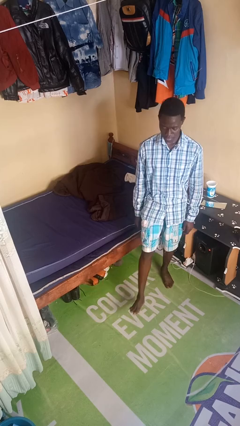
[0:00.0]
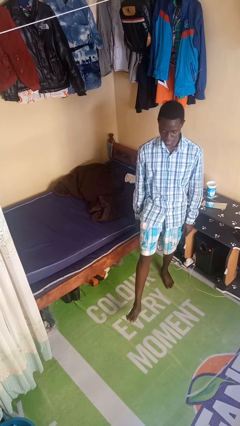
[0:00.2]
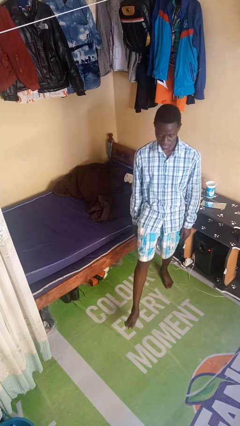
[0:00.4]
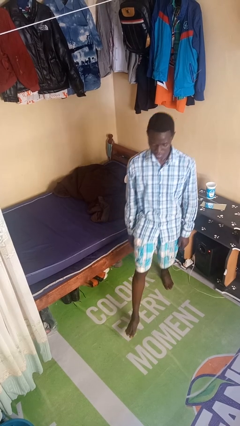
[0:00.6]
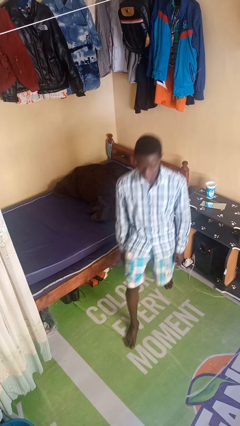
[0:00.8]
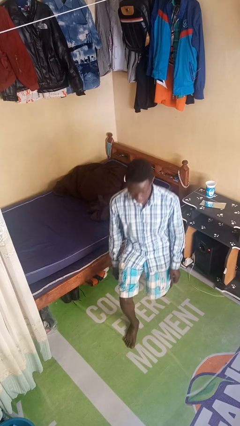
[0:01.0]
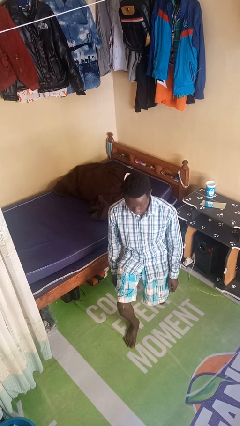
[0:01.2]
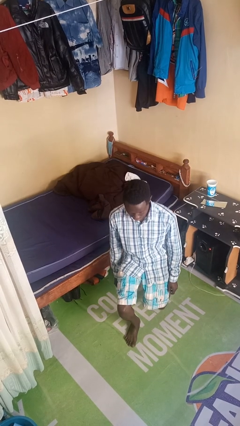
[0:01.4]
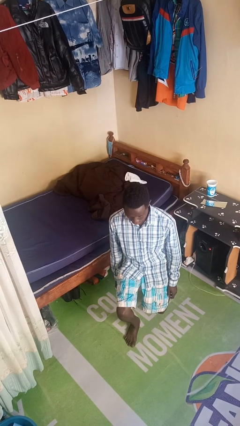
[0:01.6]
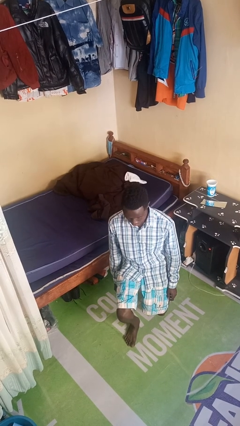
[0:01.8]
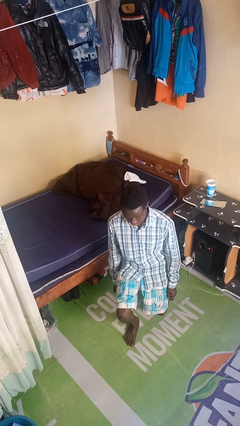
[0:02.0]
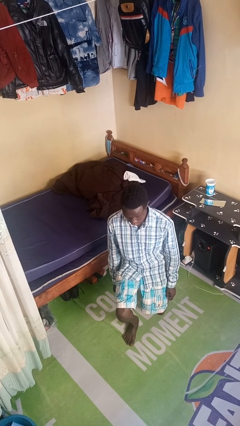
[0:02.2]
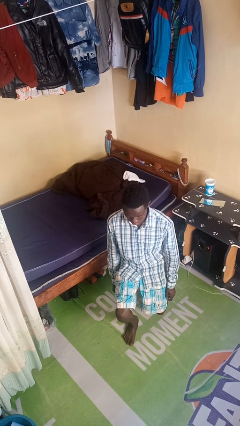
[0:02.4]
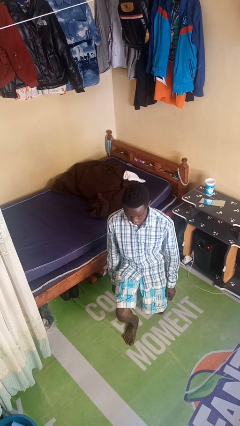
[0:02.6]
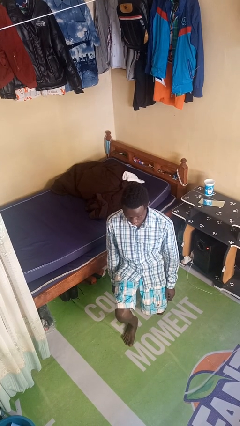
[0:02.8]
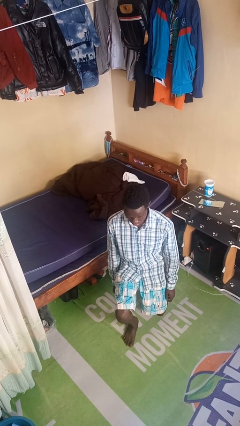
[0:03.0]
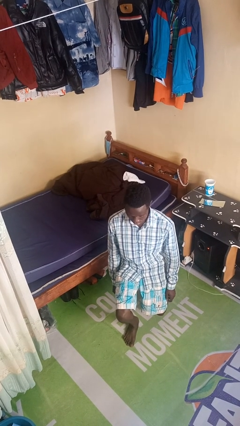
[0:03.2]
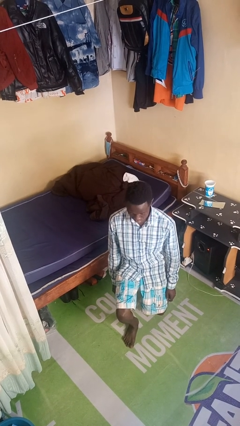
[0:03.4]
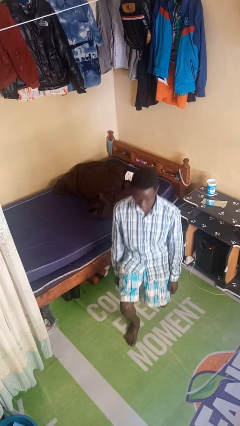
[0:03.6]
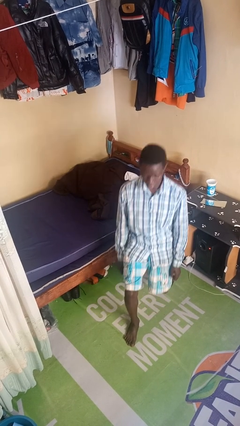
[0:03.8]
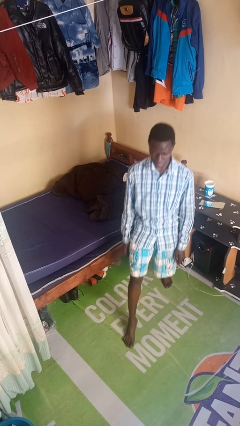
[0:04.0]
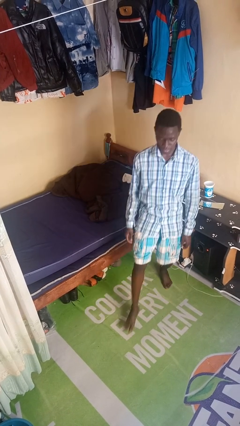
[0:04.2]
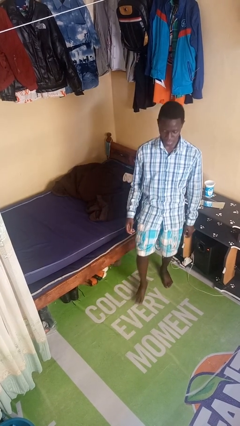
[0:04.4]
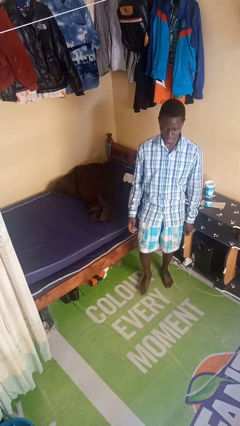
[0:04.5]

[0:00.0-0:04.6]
person exercises with lunges

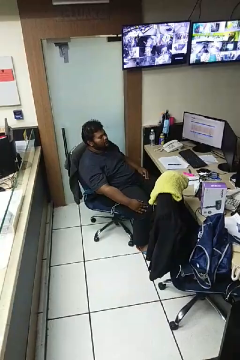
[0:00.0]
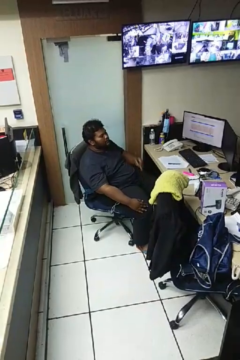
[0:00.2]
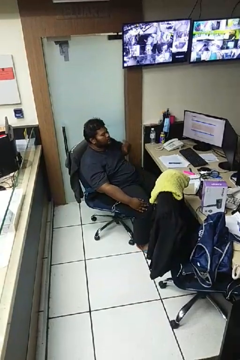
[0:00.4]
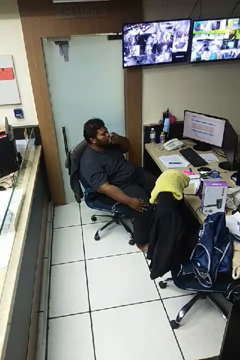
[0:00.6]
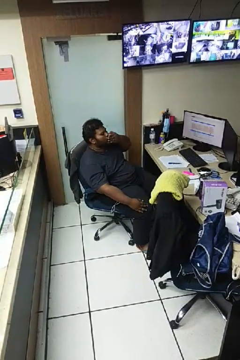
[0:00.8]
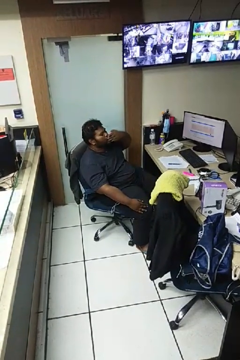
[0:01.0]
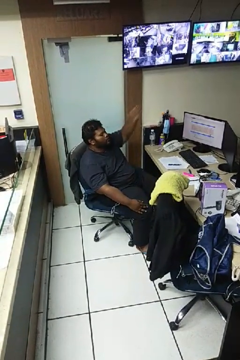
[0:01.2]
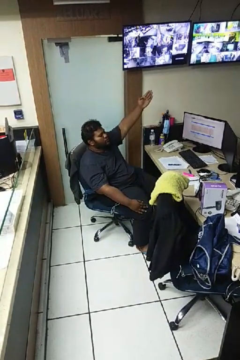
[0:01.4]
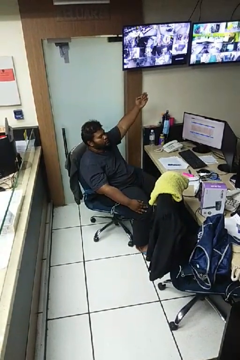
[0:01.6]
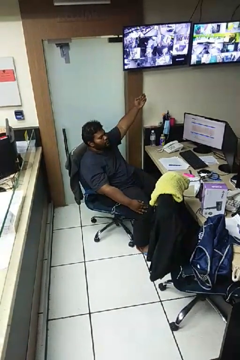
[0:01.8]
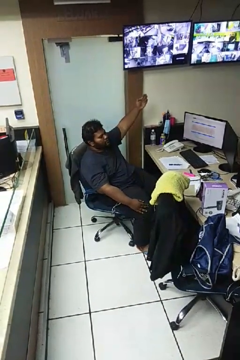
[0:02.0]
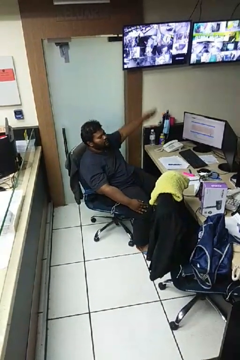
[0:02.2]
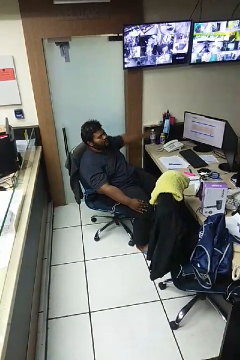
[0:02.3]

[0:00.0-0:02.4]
person gestures blow kiss

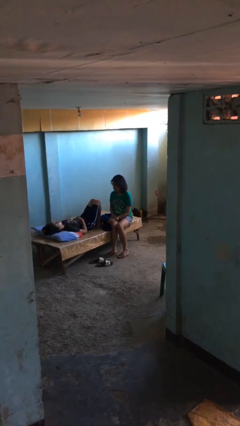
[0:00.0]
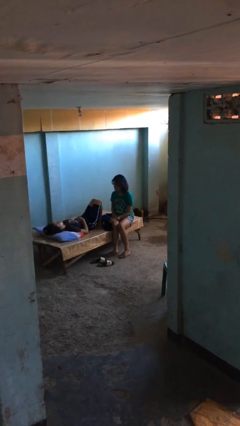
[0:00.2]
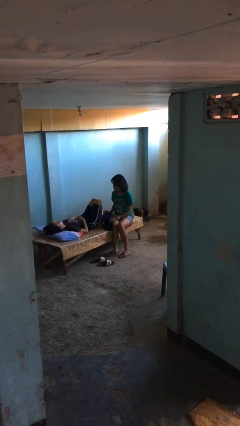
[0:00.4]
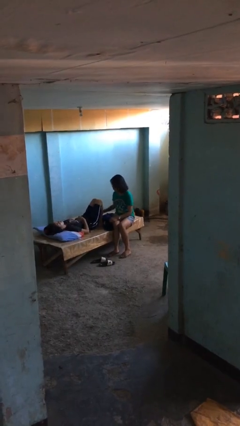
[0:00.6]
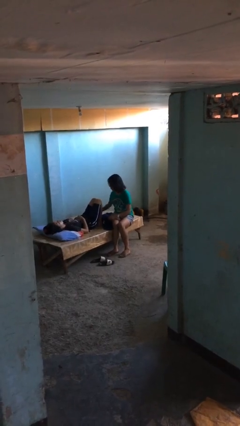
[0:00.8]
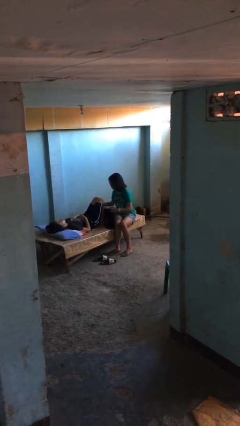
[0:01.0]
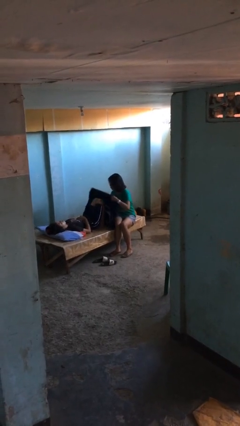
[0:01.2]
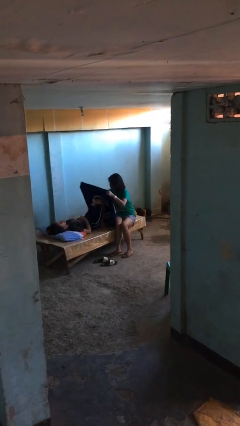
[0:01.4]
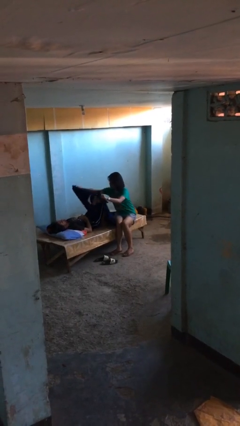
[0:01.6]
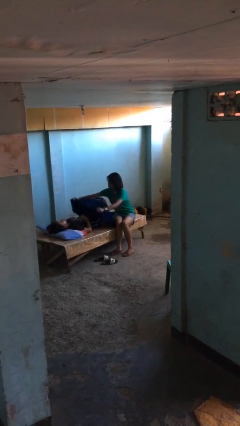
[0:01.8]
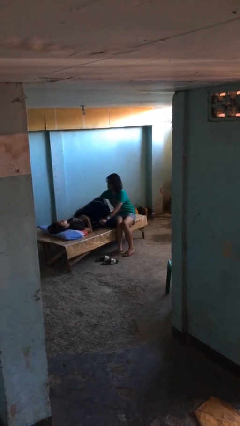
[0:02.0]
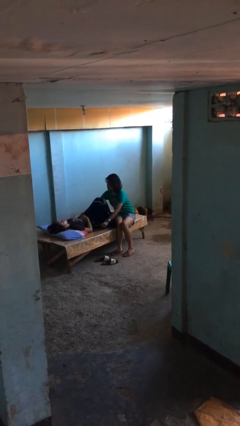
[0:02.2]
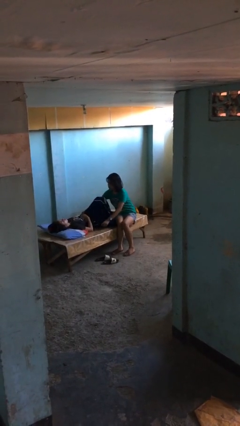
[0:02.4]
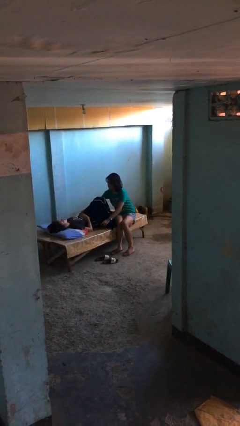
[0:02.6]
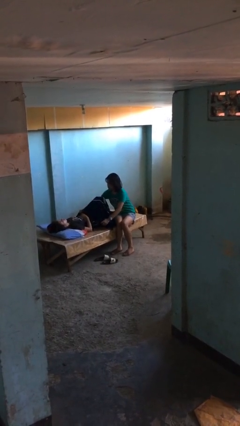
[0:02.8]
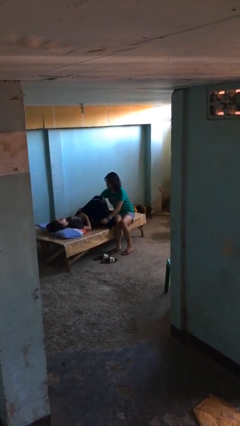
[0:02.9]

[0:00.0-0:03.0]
person covers friend with blanket

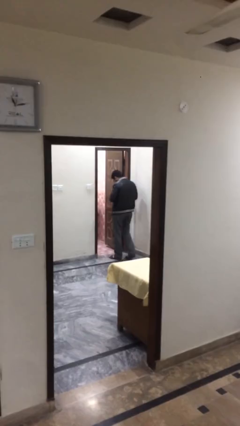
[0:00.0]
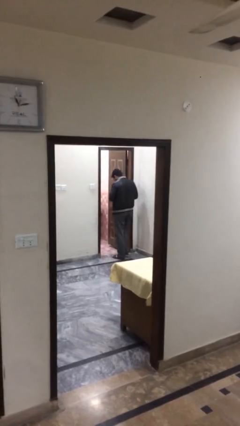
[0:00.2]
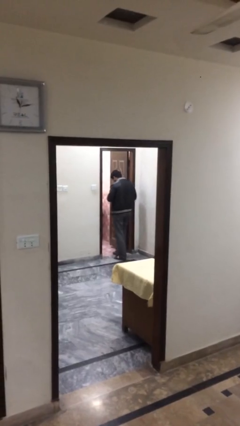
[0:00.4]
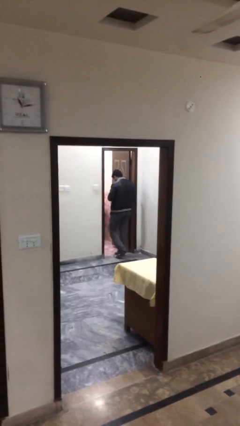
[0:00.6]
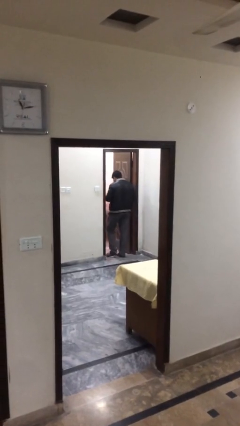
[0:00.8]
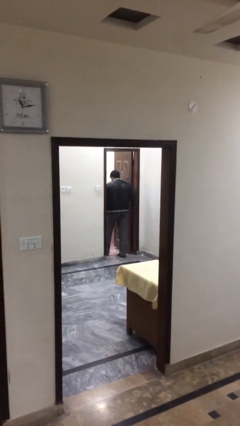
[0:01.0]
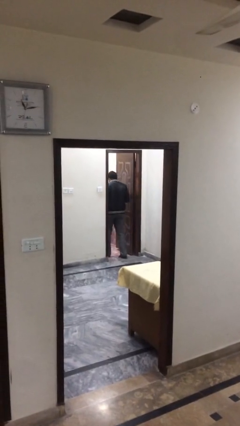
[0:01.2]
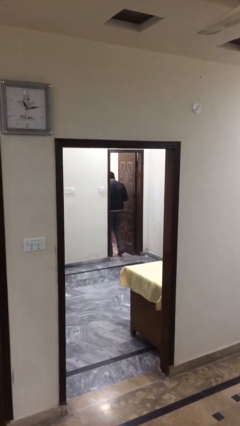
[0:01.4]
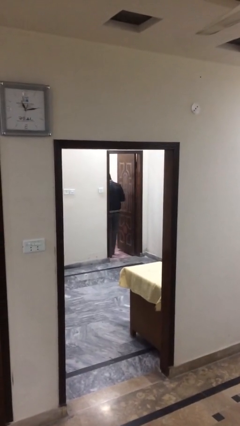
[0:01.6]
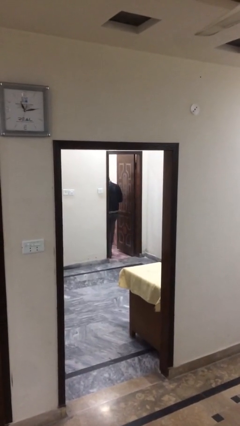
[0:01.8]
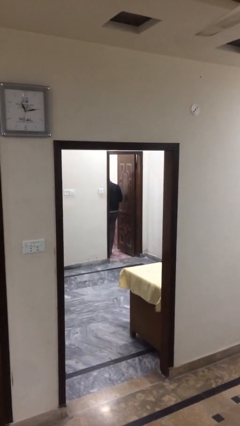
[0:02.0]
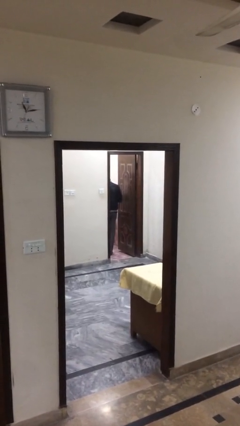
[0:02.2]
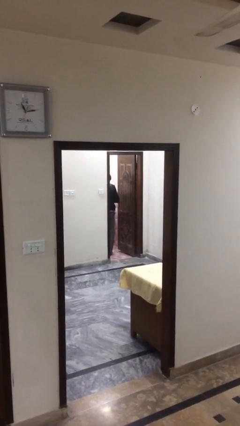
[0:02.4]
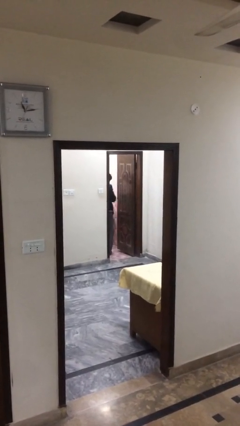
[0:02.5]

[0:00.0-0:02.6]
person enters scene through structure

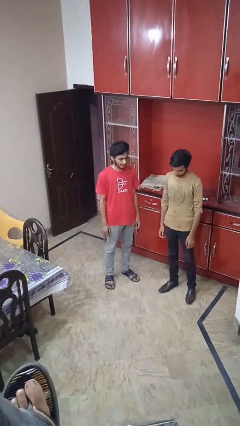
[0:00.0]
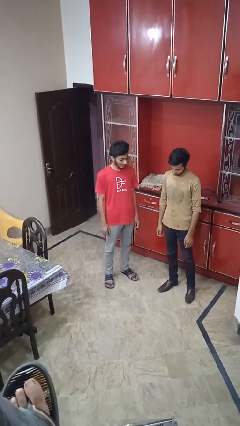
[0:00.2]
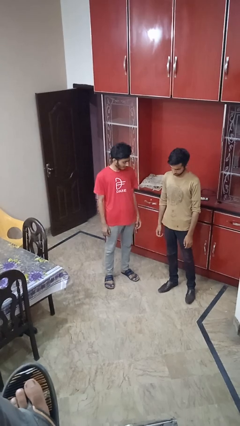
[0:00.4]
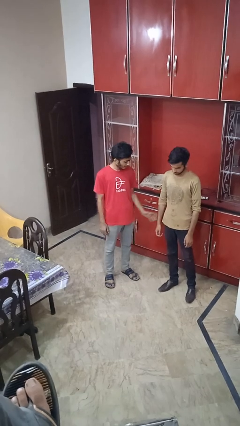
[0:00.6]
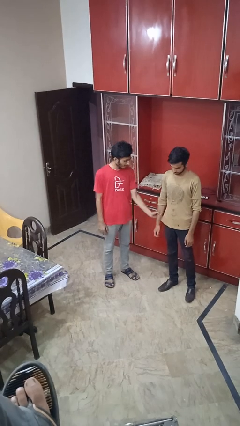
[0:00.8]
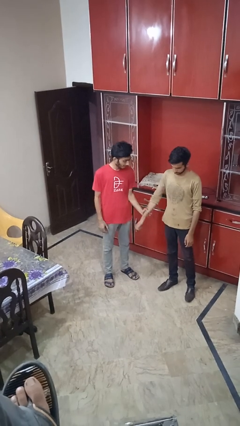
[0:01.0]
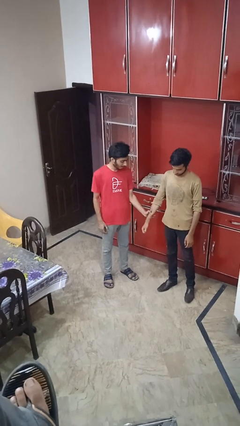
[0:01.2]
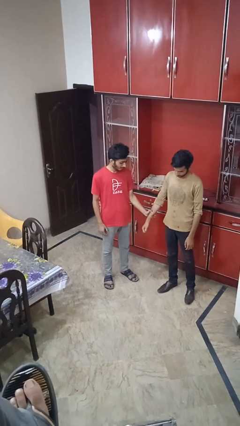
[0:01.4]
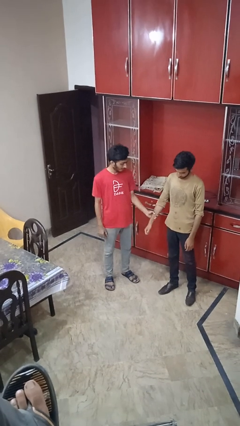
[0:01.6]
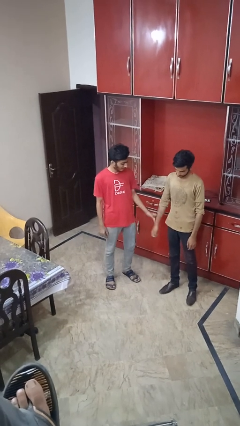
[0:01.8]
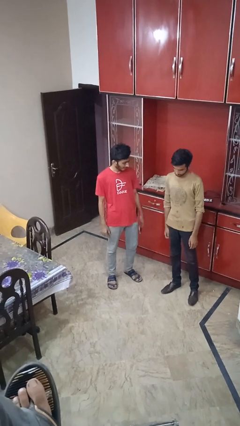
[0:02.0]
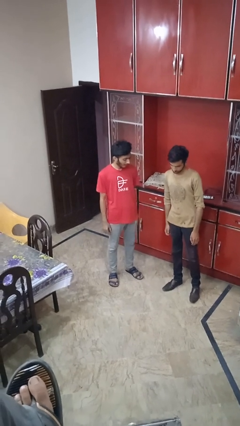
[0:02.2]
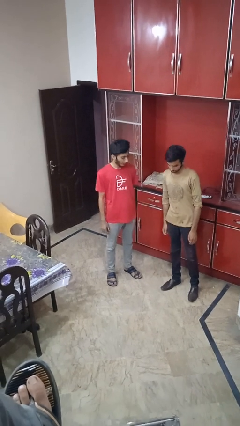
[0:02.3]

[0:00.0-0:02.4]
person grabs person by forearm

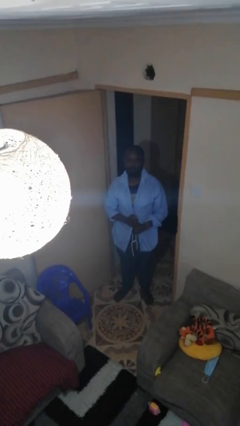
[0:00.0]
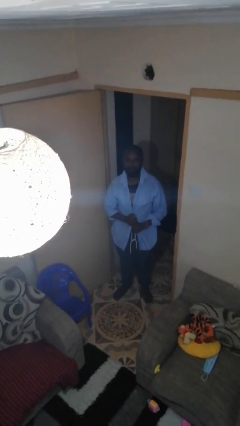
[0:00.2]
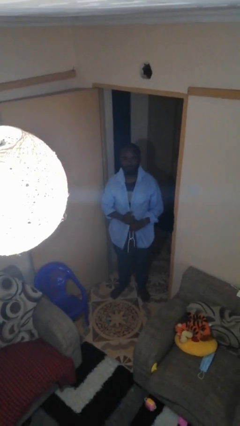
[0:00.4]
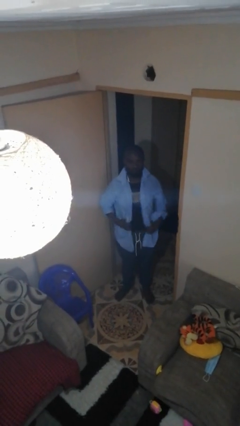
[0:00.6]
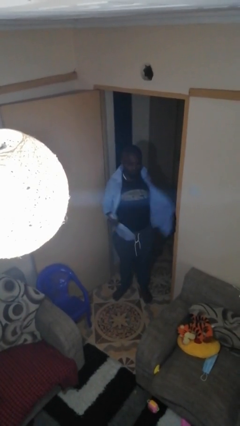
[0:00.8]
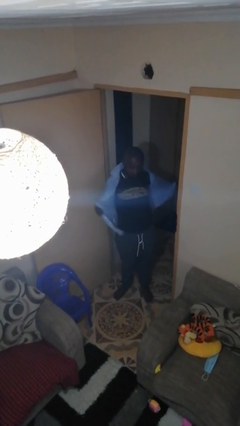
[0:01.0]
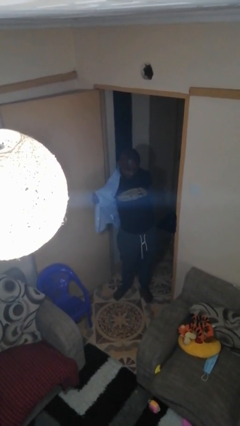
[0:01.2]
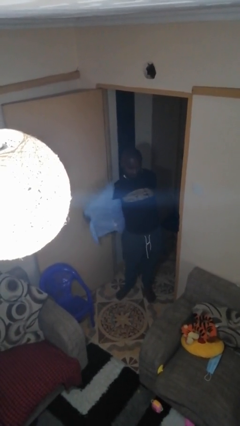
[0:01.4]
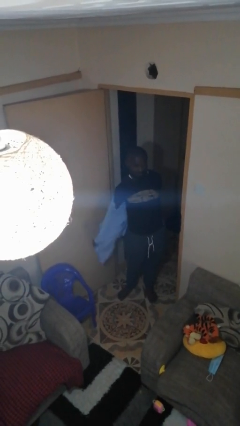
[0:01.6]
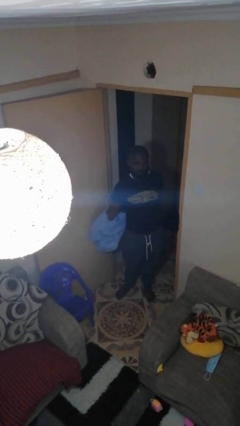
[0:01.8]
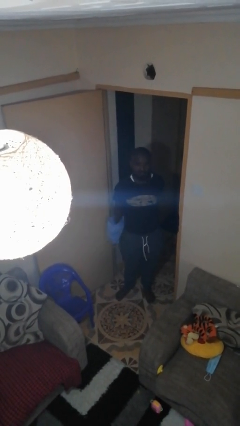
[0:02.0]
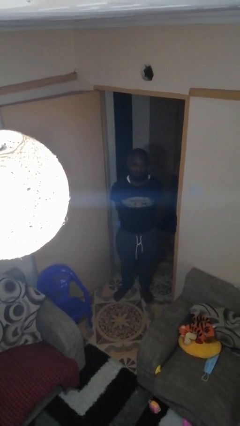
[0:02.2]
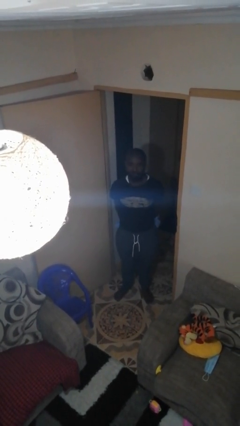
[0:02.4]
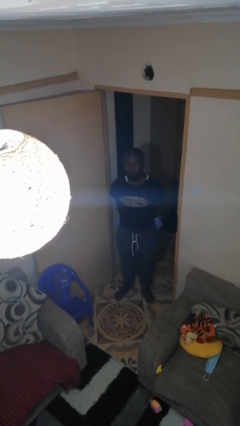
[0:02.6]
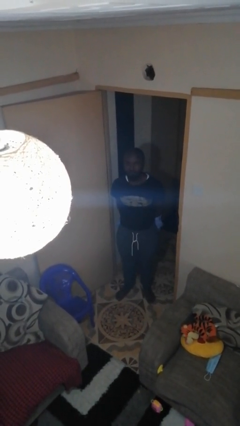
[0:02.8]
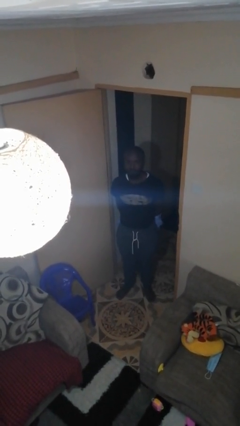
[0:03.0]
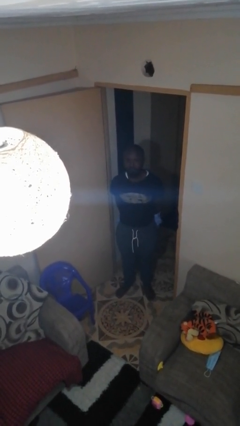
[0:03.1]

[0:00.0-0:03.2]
person takes off shirt
